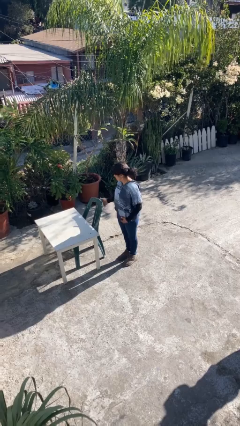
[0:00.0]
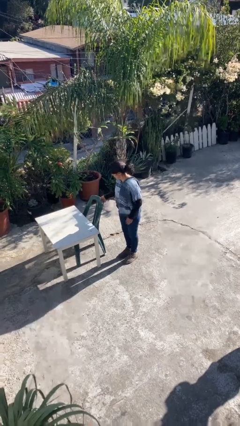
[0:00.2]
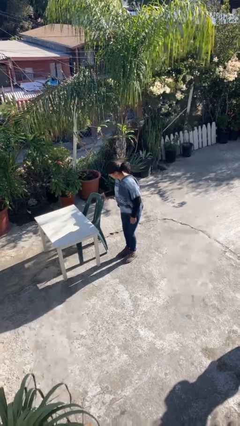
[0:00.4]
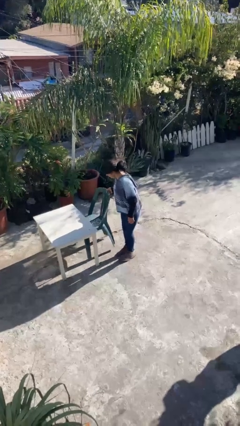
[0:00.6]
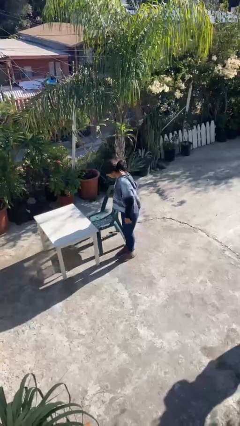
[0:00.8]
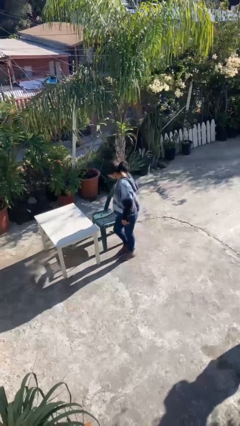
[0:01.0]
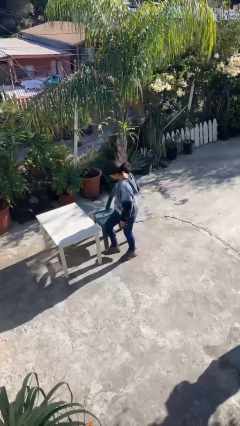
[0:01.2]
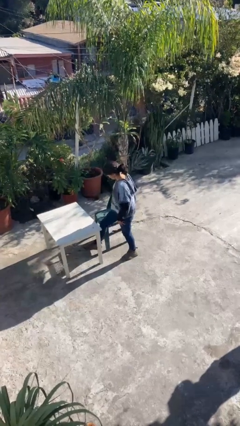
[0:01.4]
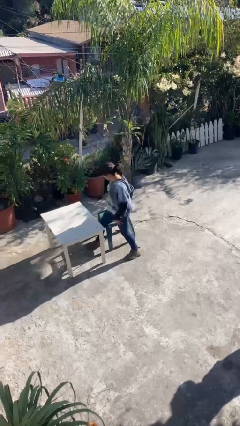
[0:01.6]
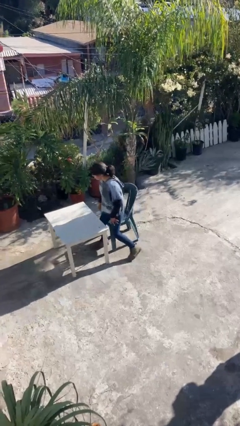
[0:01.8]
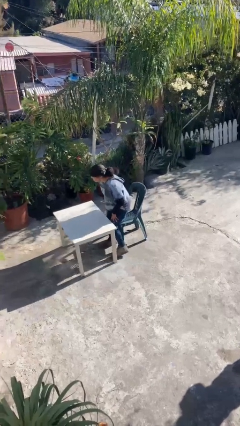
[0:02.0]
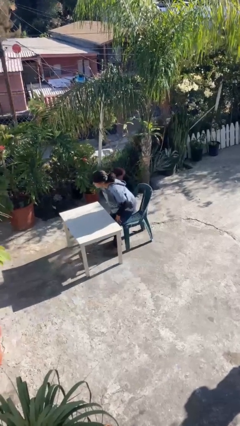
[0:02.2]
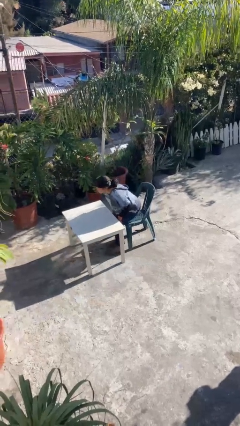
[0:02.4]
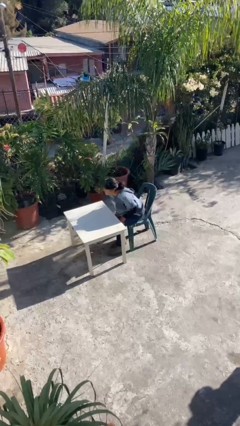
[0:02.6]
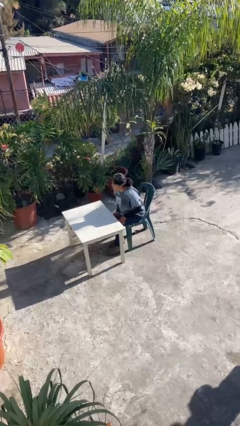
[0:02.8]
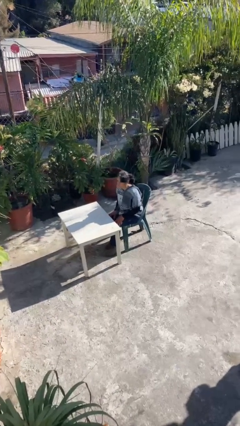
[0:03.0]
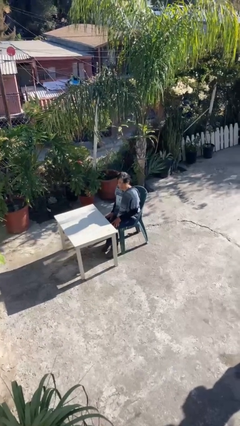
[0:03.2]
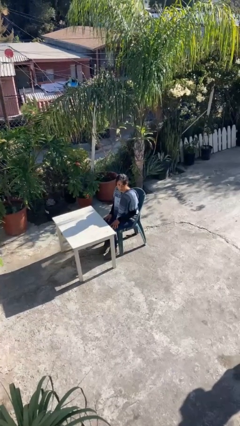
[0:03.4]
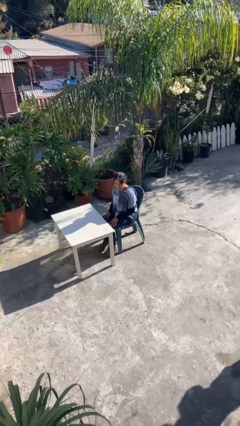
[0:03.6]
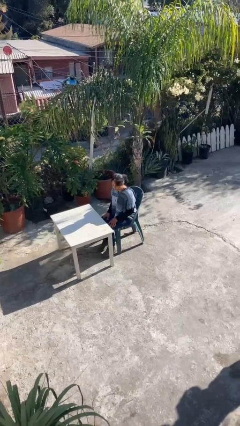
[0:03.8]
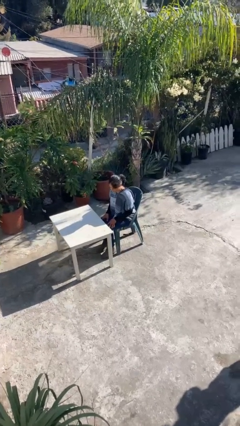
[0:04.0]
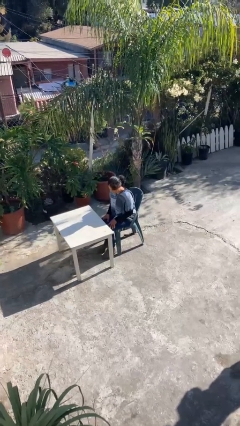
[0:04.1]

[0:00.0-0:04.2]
person sits down

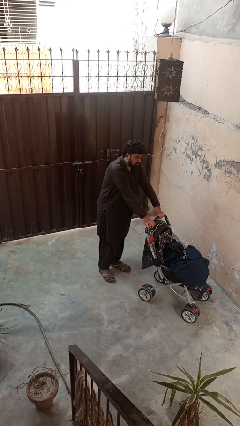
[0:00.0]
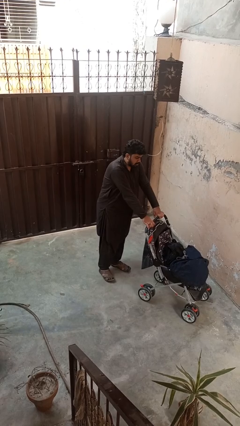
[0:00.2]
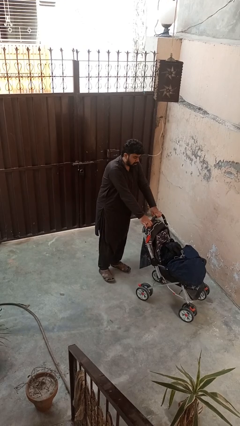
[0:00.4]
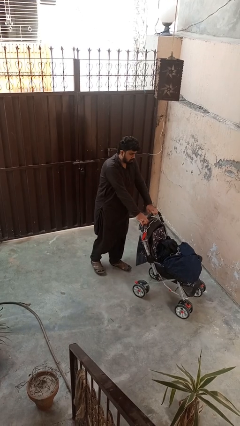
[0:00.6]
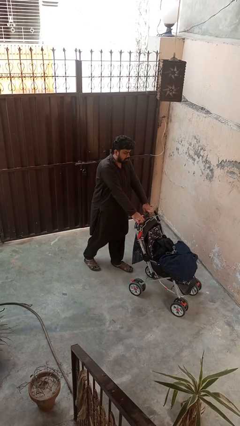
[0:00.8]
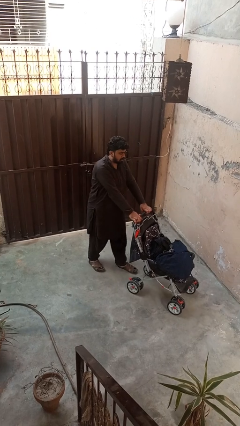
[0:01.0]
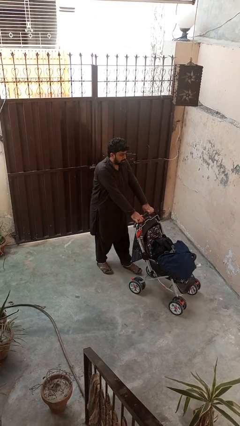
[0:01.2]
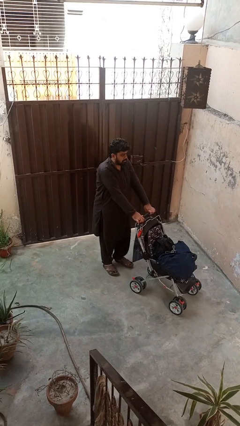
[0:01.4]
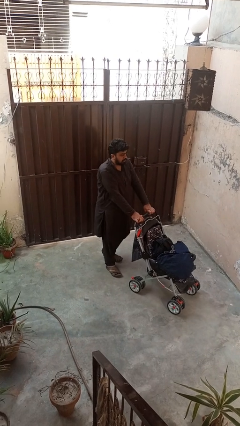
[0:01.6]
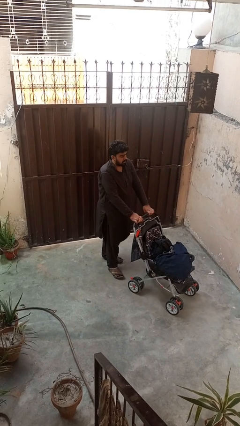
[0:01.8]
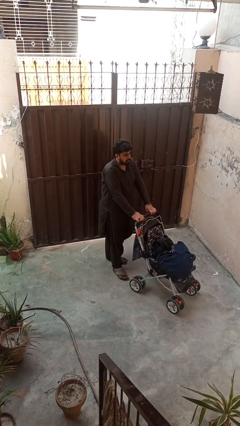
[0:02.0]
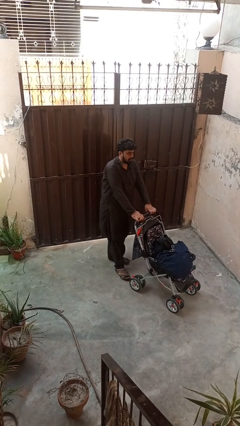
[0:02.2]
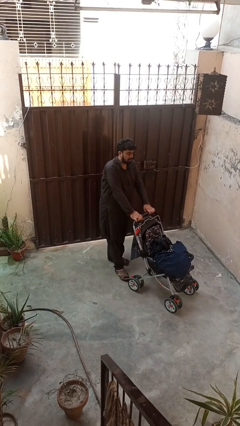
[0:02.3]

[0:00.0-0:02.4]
person pulls wheeled cart

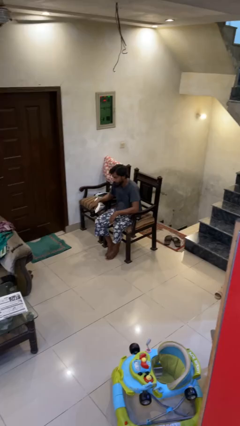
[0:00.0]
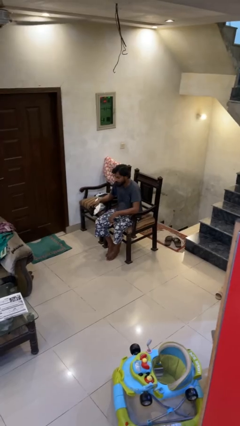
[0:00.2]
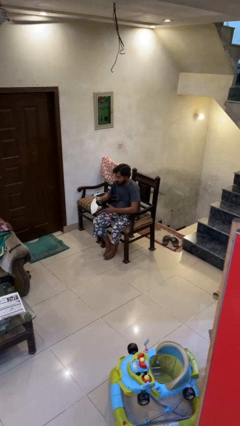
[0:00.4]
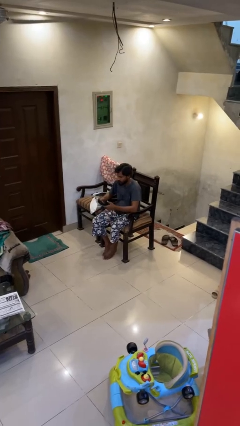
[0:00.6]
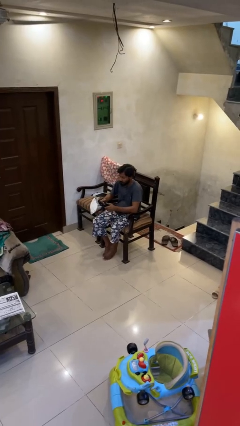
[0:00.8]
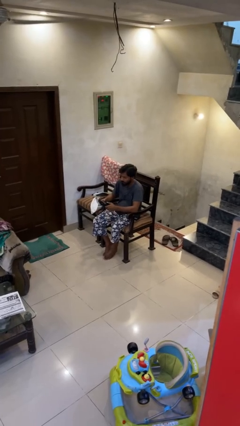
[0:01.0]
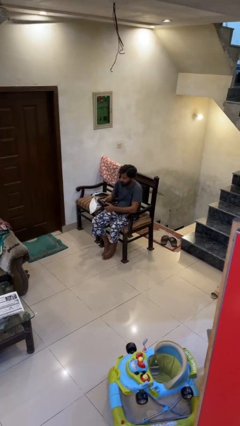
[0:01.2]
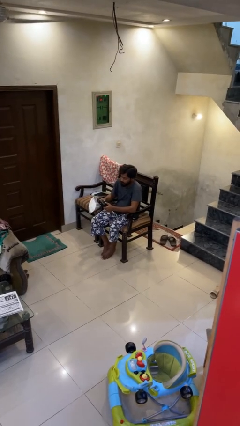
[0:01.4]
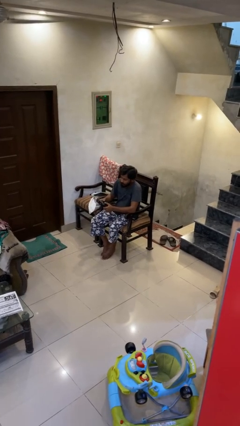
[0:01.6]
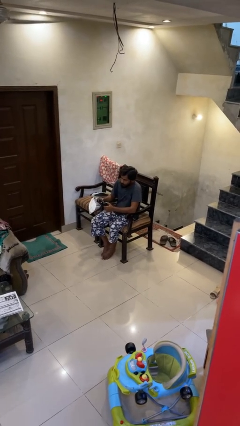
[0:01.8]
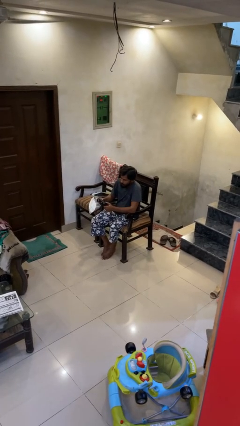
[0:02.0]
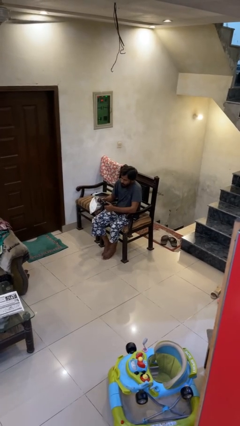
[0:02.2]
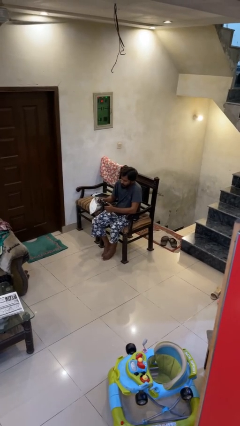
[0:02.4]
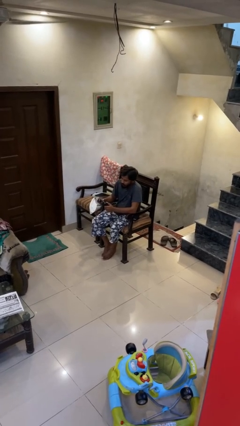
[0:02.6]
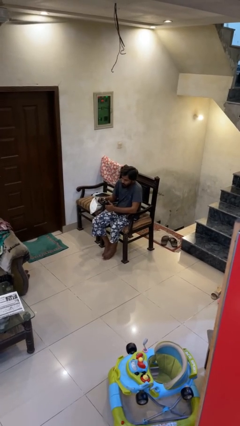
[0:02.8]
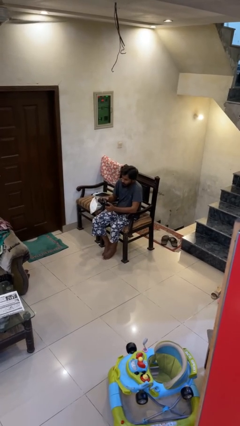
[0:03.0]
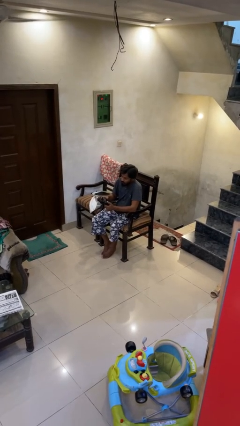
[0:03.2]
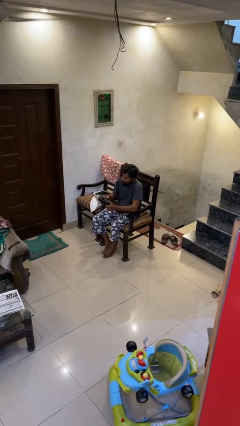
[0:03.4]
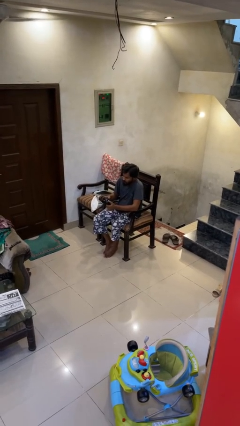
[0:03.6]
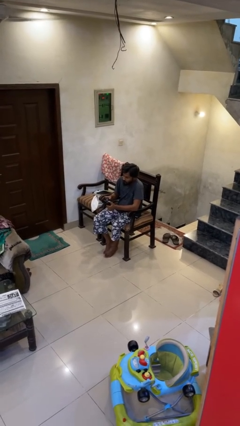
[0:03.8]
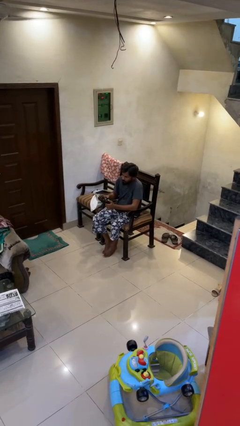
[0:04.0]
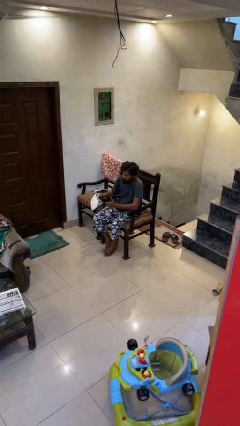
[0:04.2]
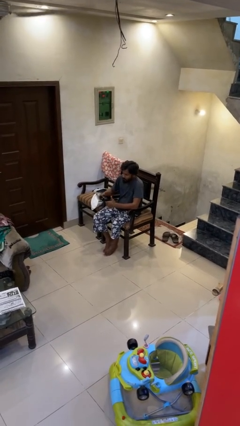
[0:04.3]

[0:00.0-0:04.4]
person interacts with handheld game

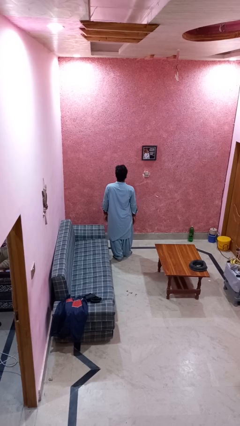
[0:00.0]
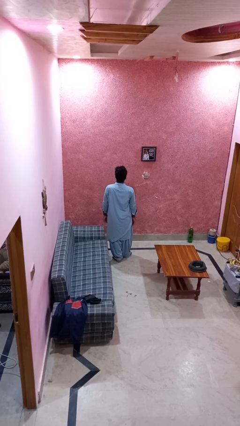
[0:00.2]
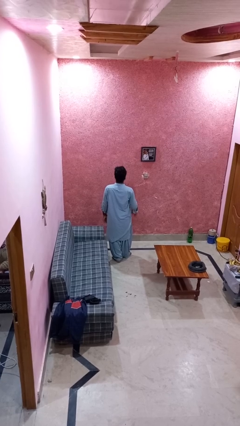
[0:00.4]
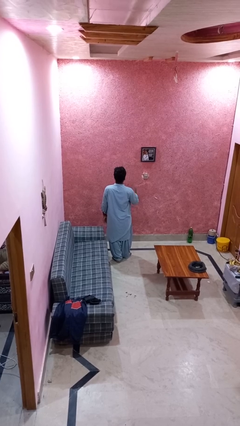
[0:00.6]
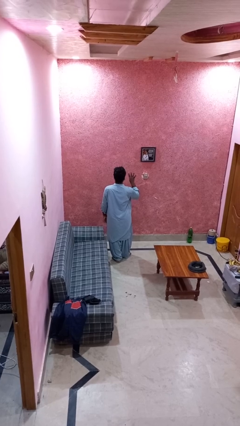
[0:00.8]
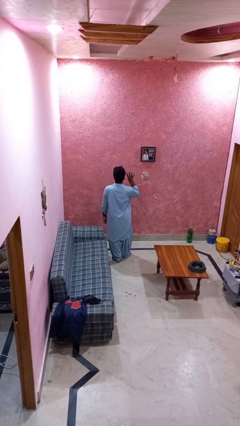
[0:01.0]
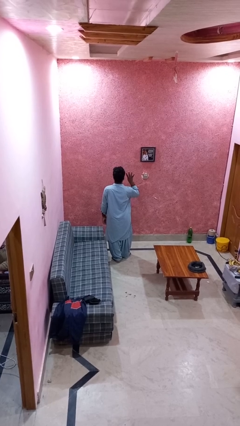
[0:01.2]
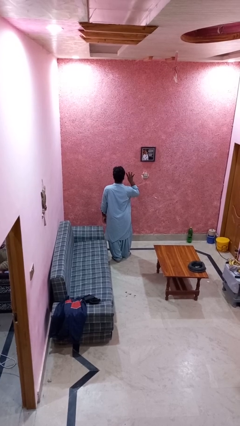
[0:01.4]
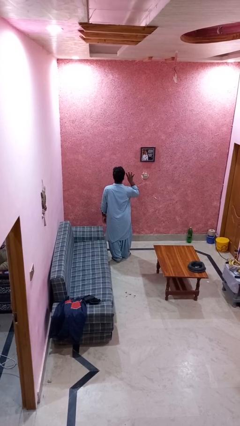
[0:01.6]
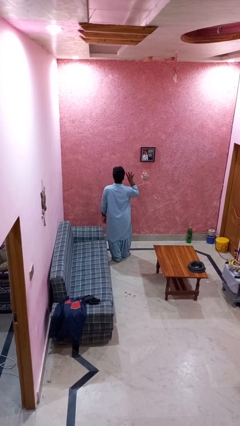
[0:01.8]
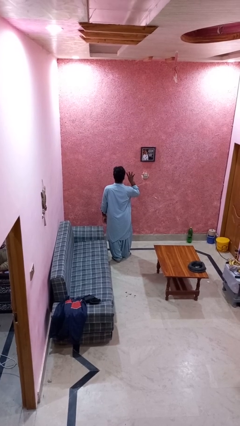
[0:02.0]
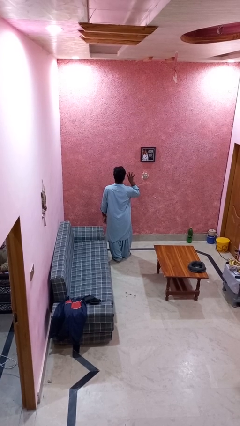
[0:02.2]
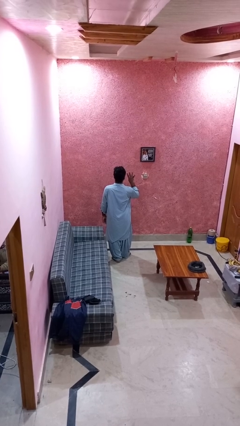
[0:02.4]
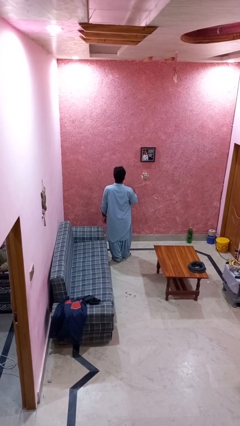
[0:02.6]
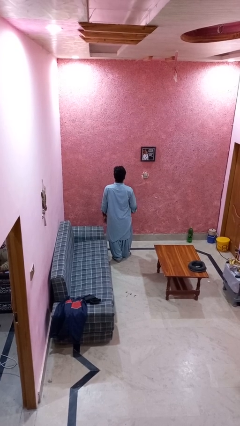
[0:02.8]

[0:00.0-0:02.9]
person gestures number four

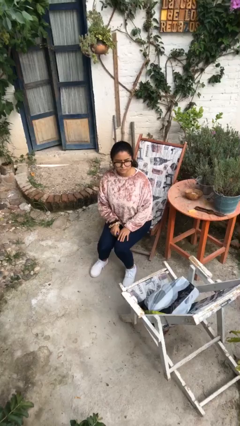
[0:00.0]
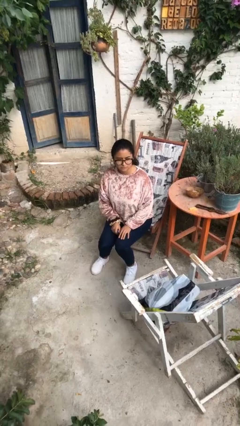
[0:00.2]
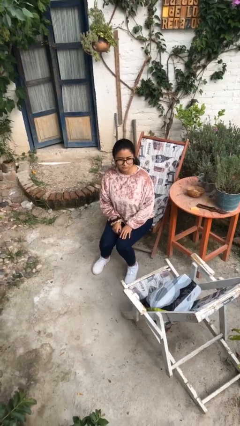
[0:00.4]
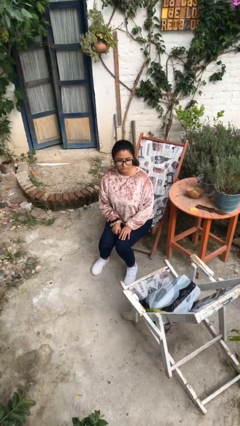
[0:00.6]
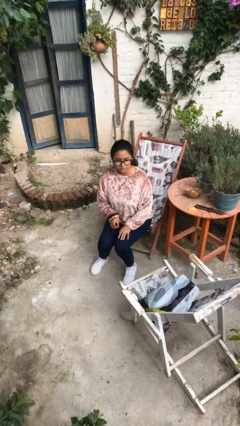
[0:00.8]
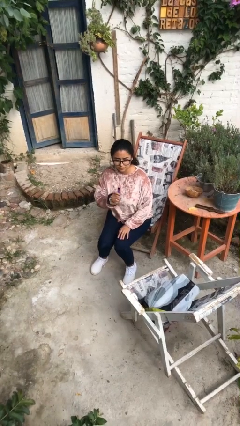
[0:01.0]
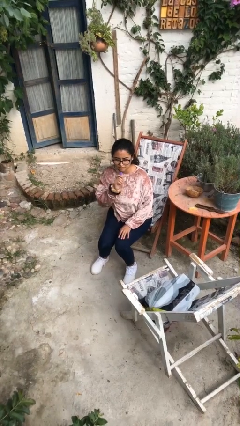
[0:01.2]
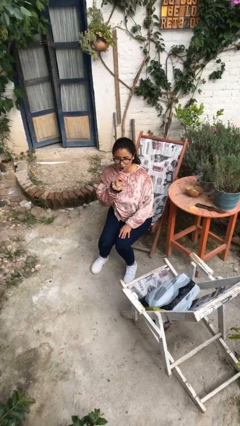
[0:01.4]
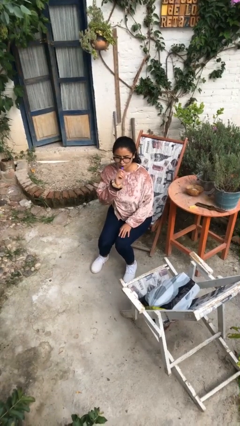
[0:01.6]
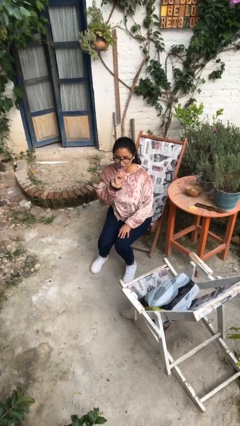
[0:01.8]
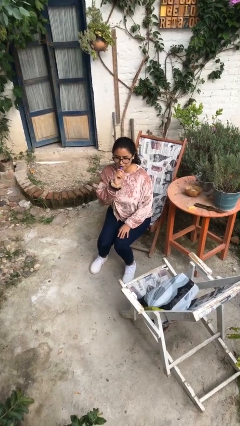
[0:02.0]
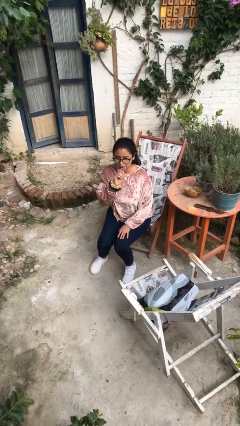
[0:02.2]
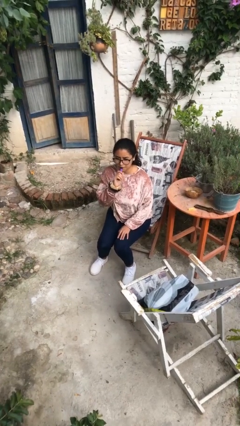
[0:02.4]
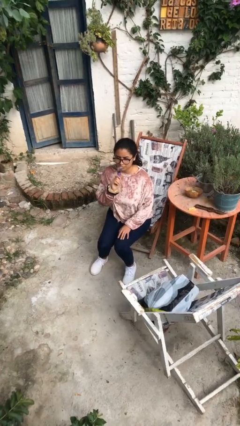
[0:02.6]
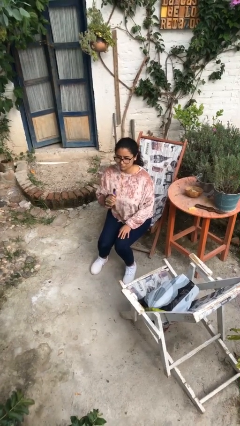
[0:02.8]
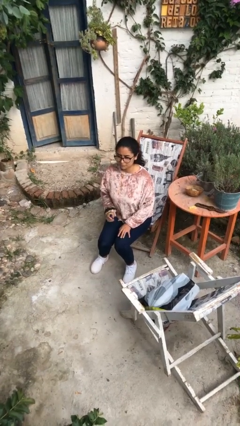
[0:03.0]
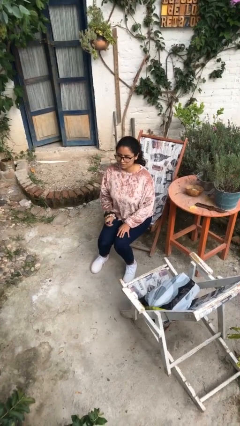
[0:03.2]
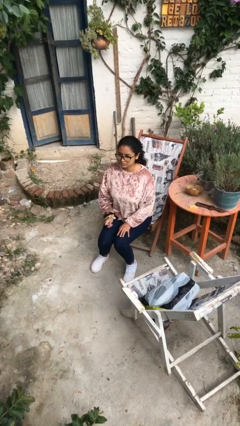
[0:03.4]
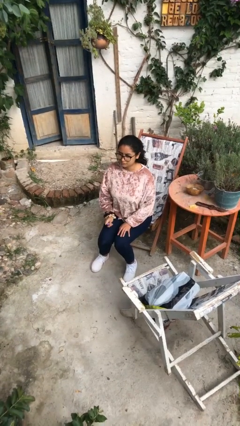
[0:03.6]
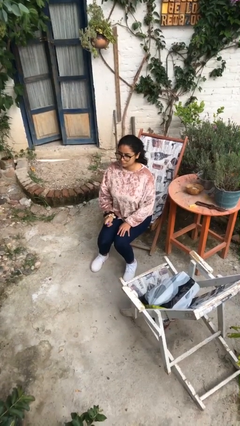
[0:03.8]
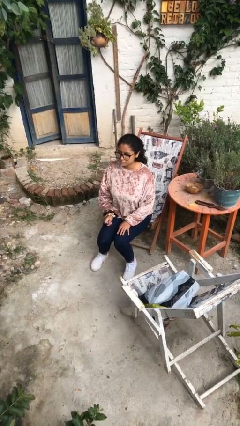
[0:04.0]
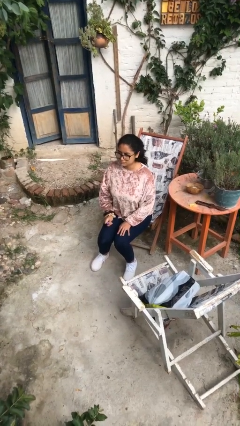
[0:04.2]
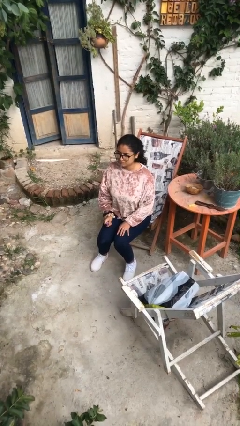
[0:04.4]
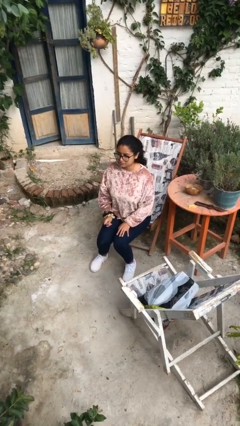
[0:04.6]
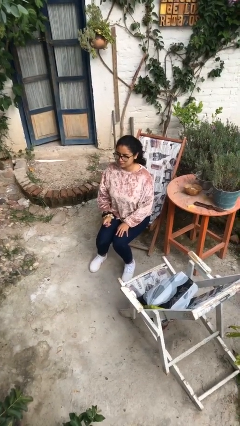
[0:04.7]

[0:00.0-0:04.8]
person vapes
